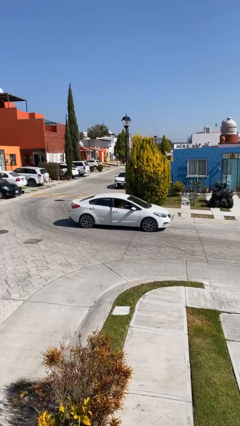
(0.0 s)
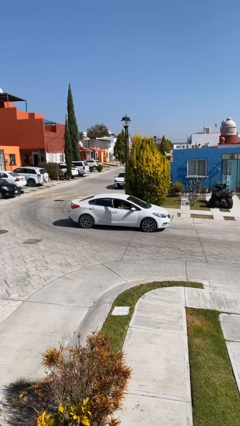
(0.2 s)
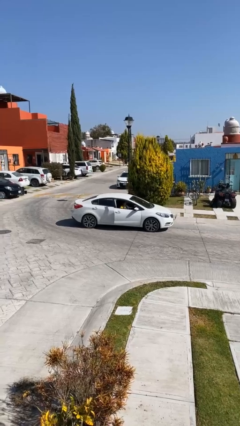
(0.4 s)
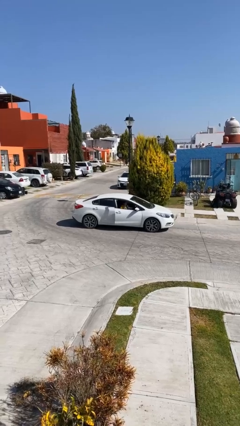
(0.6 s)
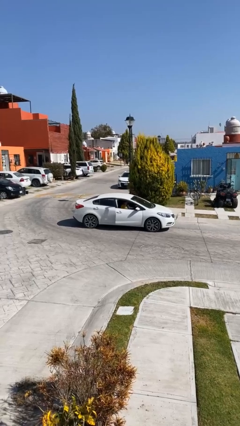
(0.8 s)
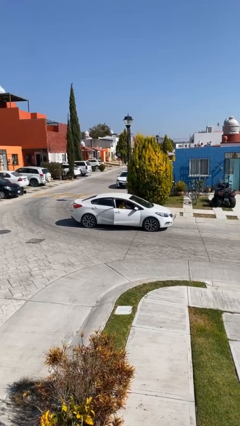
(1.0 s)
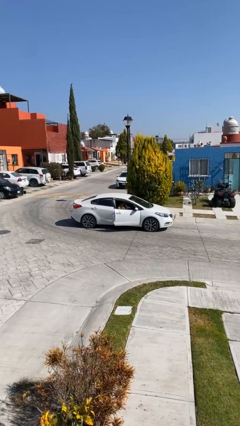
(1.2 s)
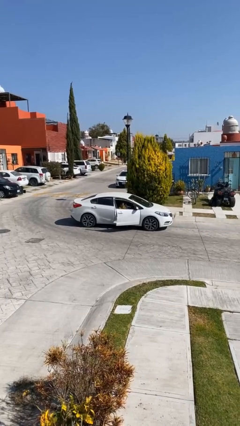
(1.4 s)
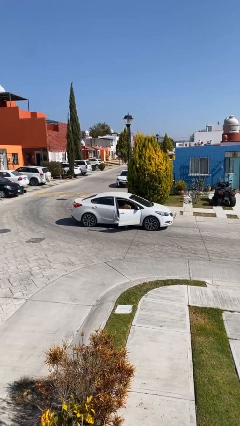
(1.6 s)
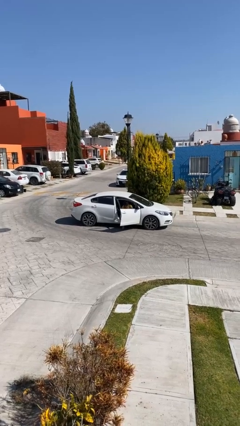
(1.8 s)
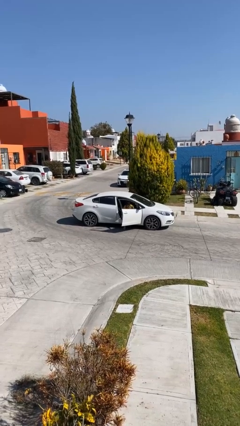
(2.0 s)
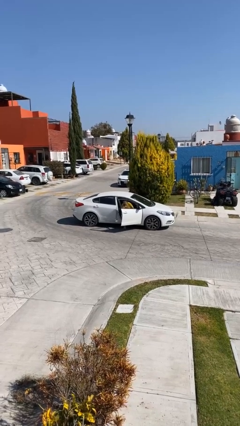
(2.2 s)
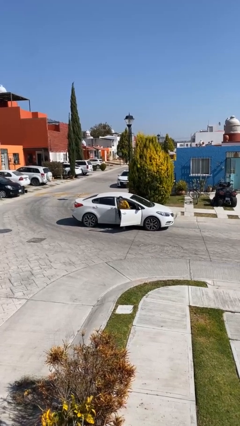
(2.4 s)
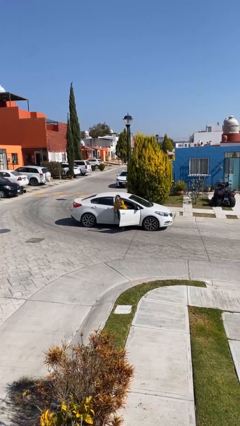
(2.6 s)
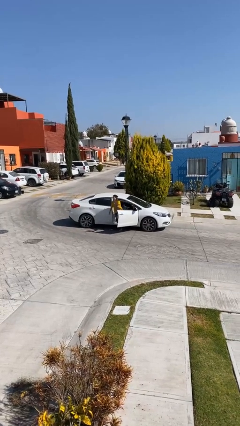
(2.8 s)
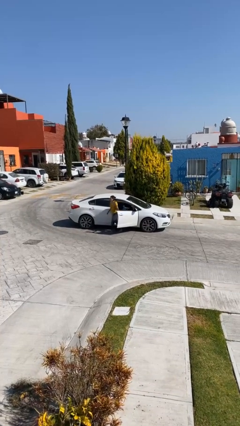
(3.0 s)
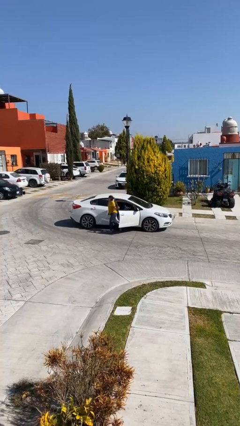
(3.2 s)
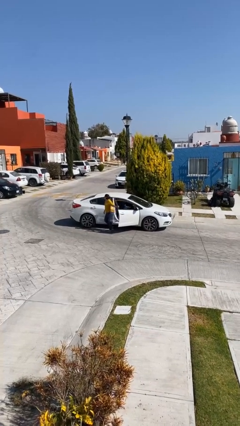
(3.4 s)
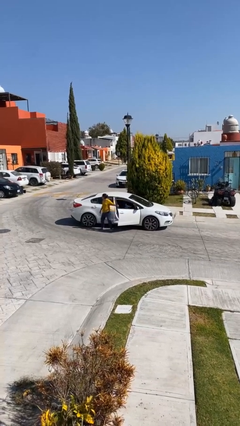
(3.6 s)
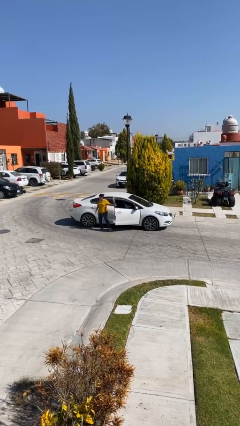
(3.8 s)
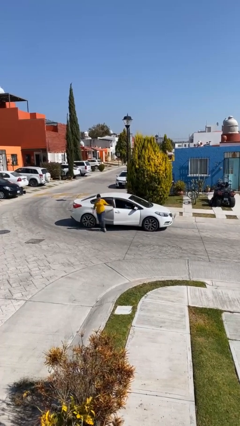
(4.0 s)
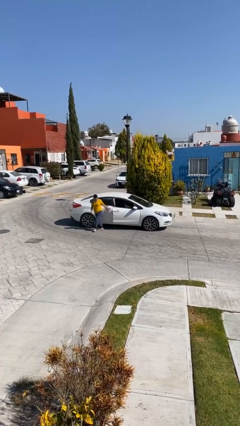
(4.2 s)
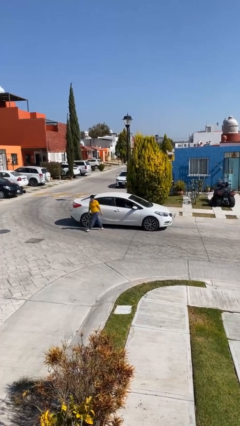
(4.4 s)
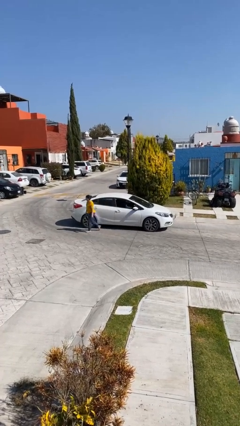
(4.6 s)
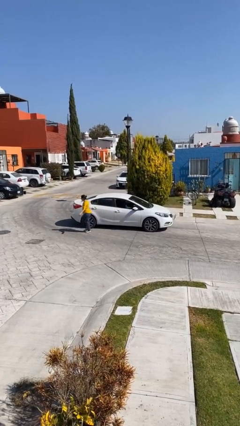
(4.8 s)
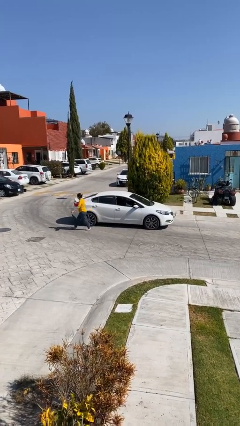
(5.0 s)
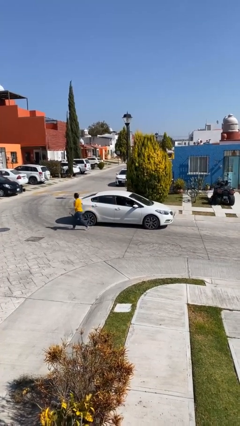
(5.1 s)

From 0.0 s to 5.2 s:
car drops off person

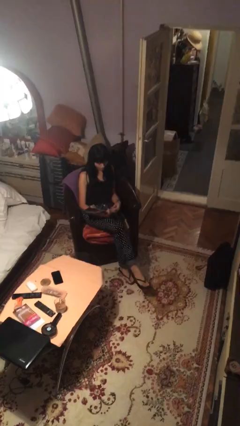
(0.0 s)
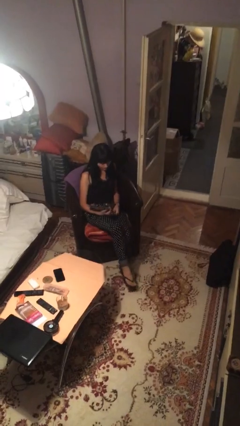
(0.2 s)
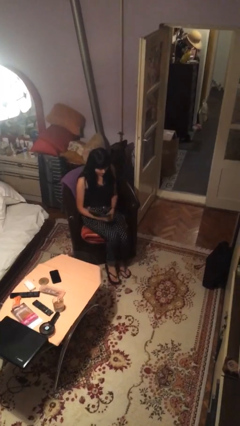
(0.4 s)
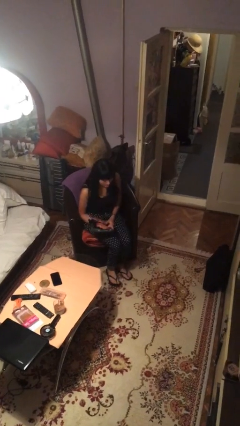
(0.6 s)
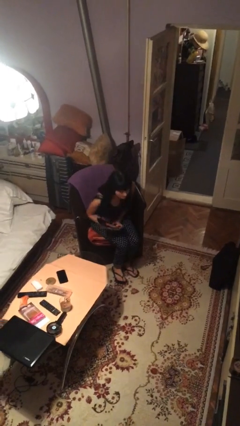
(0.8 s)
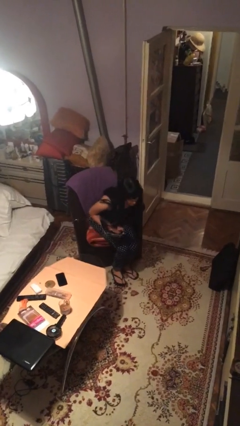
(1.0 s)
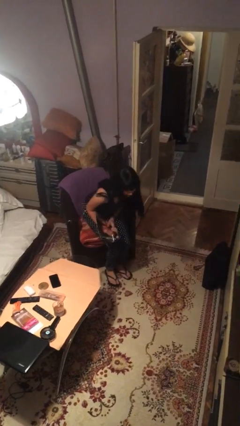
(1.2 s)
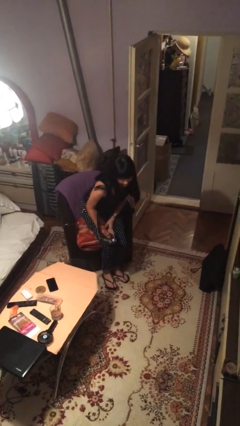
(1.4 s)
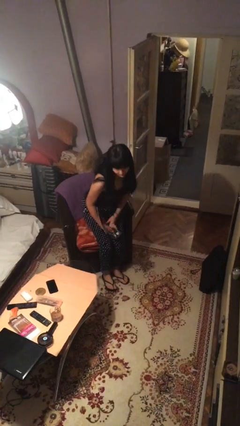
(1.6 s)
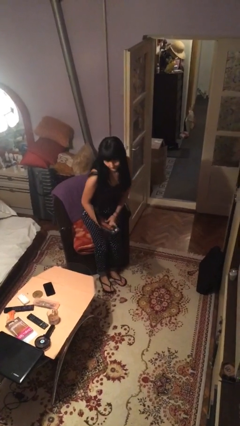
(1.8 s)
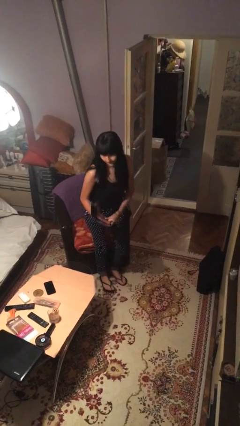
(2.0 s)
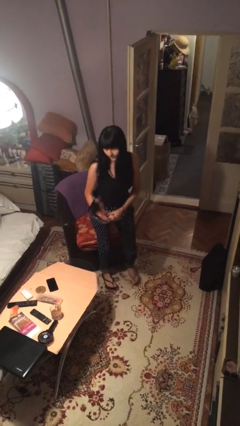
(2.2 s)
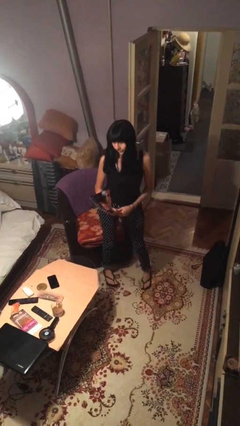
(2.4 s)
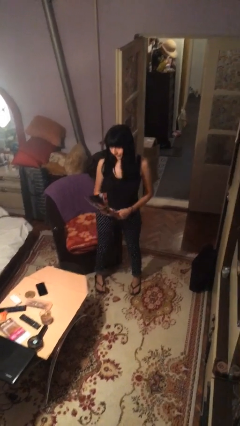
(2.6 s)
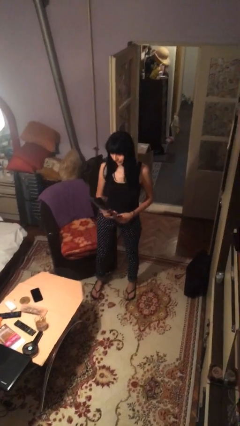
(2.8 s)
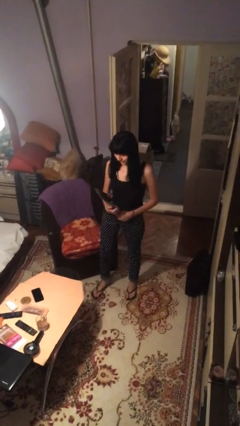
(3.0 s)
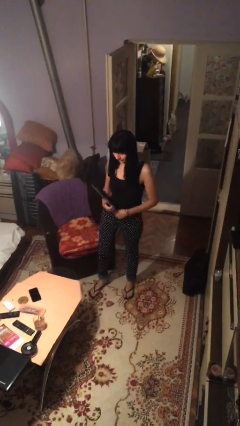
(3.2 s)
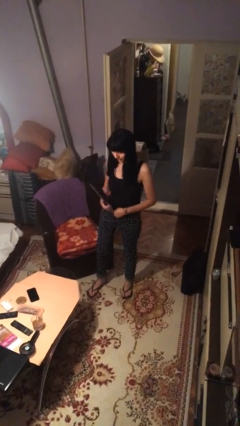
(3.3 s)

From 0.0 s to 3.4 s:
person stands up

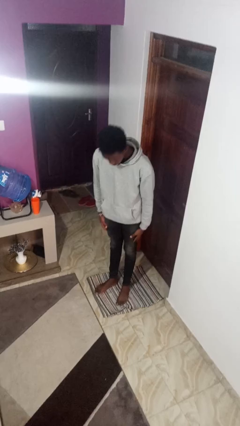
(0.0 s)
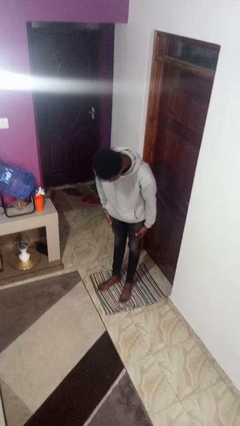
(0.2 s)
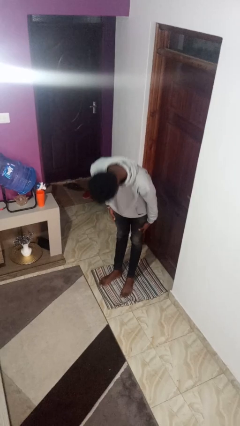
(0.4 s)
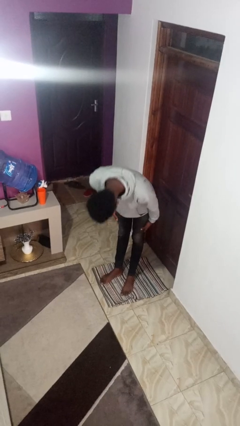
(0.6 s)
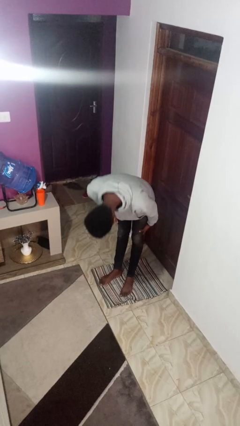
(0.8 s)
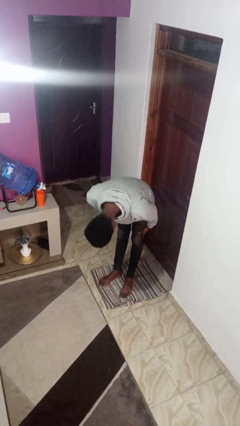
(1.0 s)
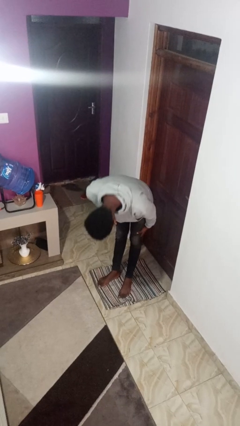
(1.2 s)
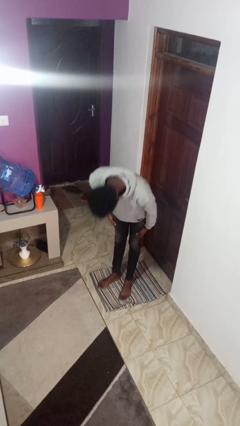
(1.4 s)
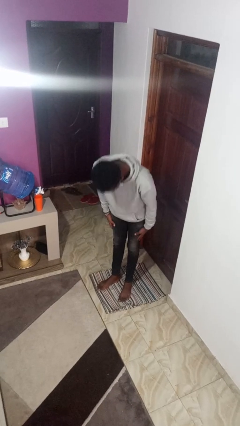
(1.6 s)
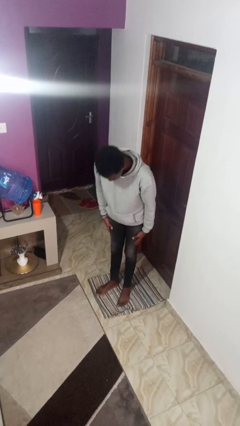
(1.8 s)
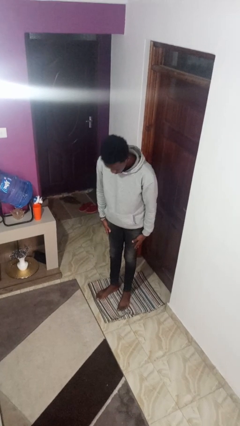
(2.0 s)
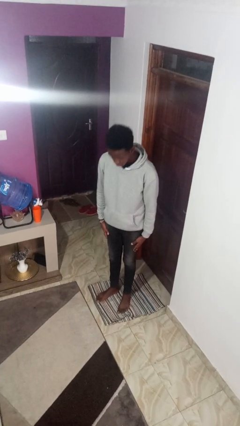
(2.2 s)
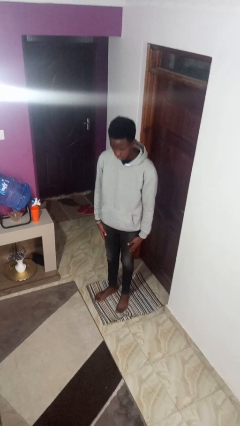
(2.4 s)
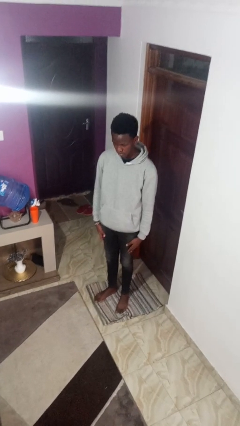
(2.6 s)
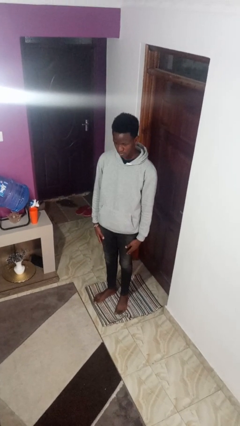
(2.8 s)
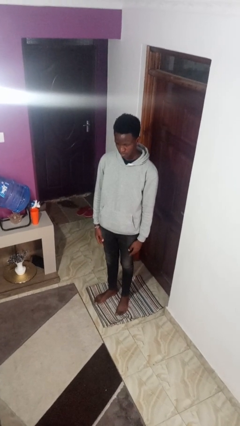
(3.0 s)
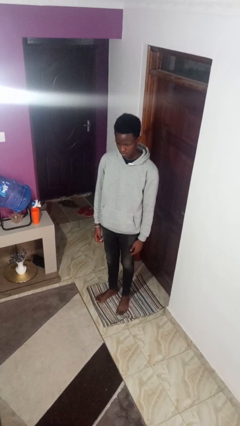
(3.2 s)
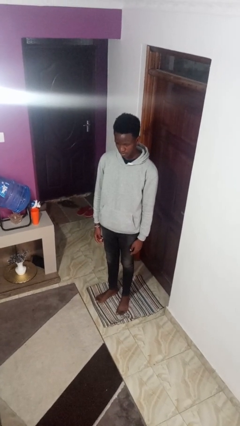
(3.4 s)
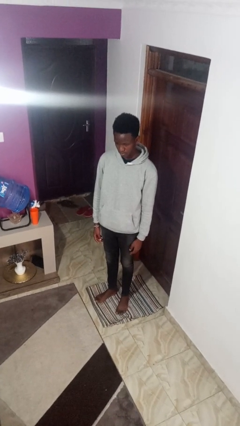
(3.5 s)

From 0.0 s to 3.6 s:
person bows

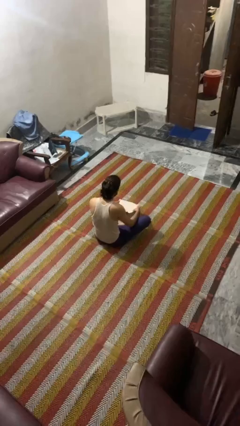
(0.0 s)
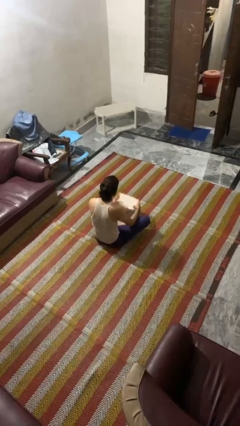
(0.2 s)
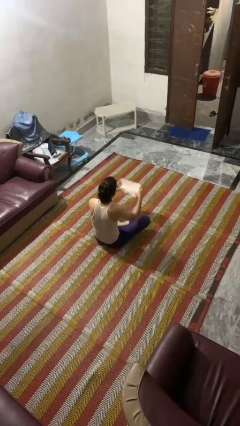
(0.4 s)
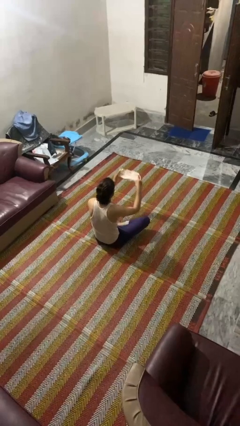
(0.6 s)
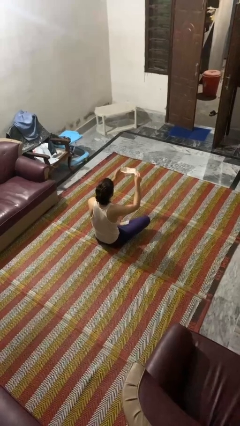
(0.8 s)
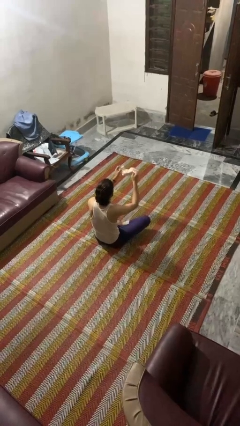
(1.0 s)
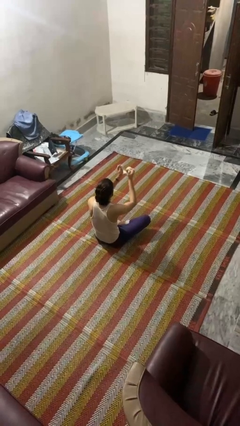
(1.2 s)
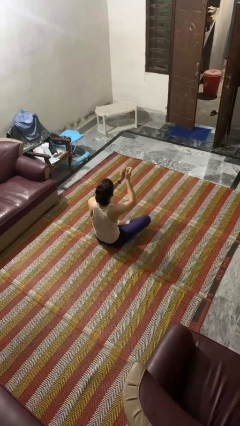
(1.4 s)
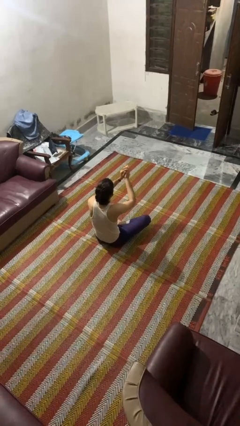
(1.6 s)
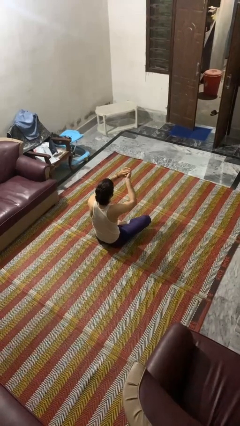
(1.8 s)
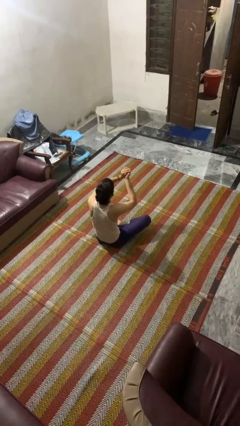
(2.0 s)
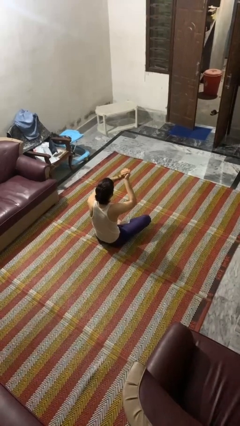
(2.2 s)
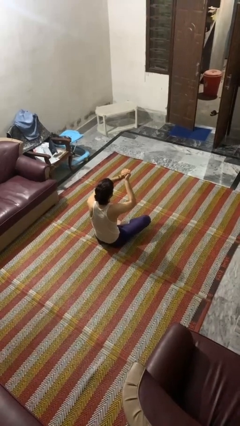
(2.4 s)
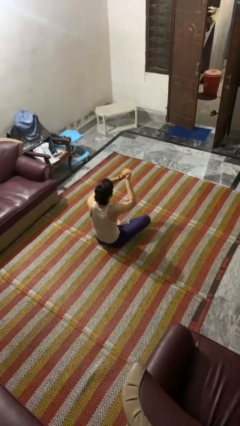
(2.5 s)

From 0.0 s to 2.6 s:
person crumples paper

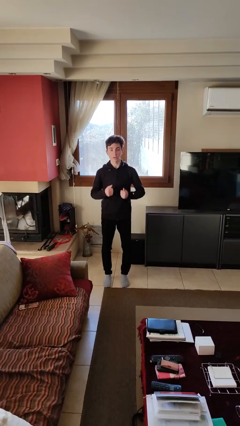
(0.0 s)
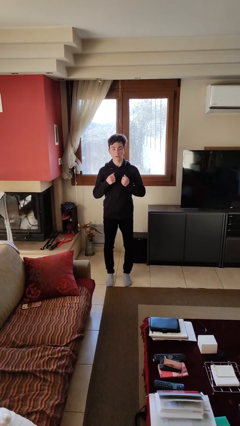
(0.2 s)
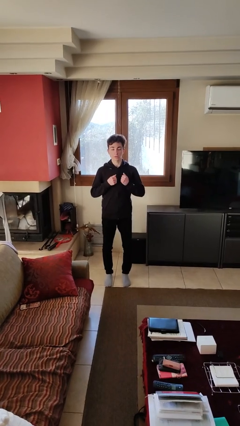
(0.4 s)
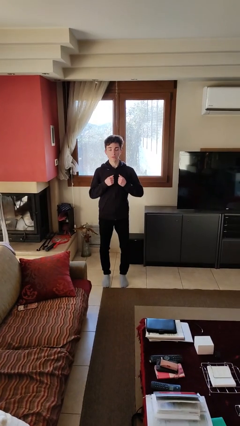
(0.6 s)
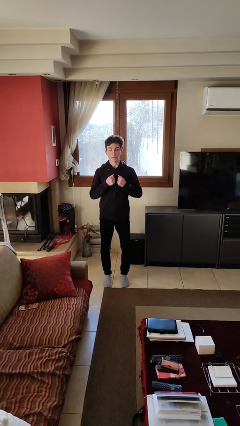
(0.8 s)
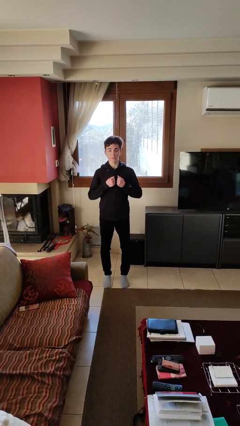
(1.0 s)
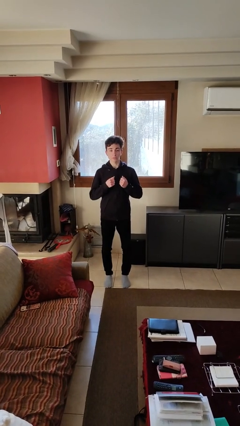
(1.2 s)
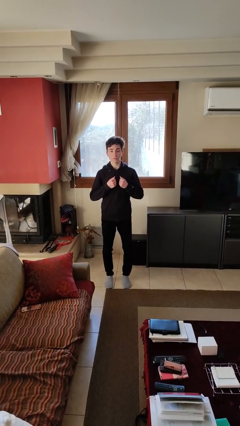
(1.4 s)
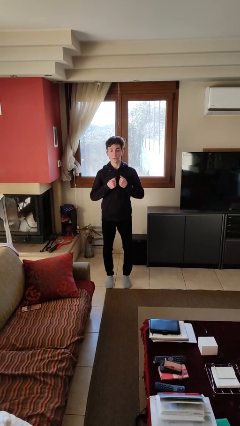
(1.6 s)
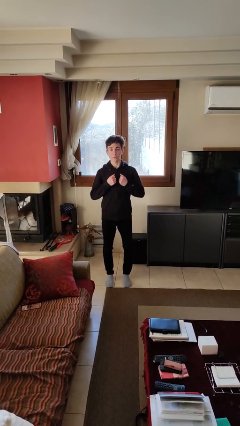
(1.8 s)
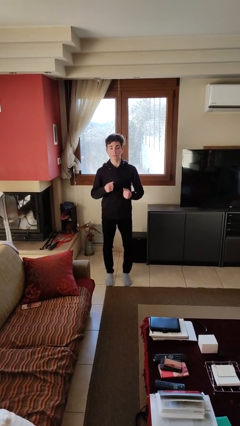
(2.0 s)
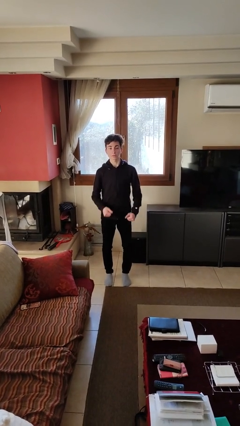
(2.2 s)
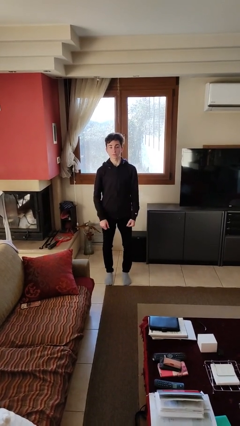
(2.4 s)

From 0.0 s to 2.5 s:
person drums on chest

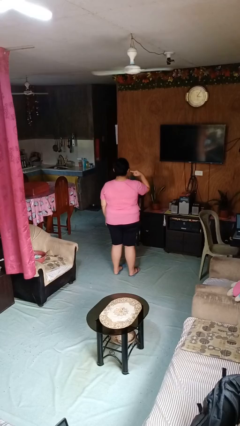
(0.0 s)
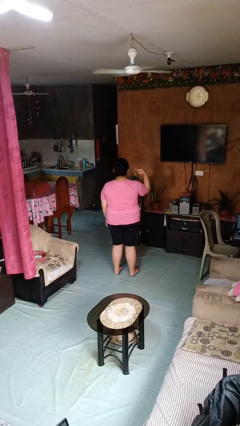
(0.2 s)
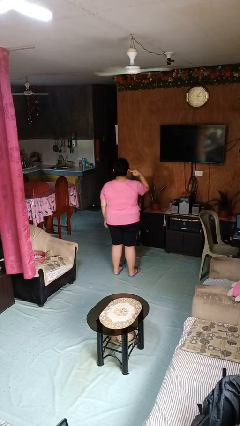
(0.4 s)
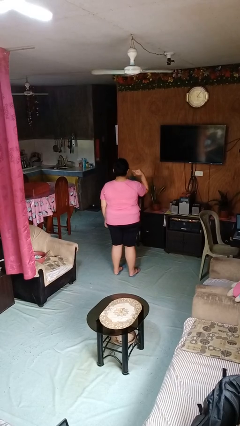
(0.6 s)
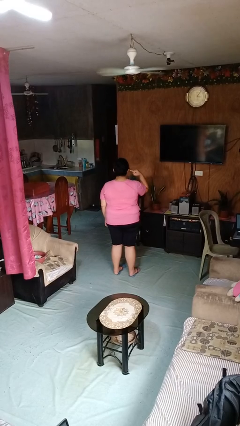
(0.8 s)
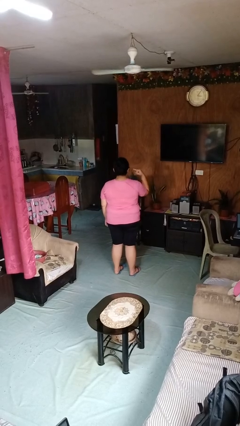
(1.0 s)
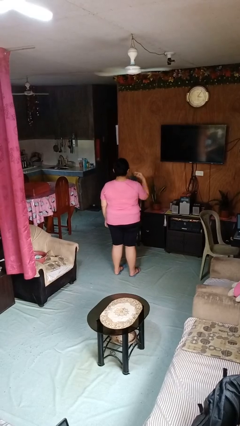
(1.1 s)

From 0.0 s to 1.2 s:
person gestures listen closely
